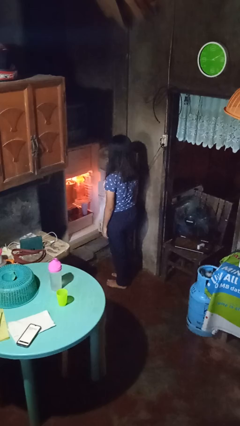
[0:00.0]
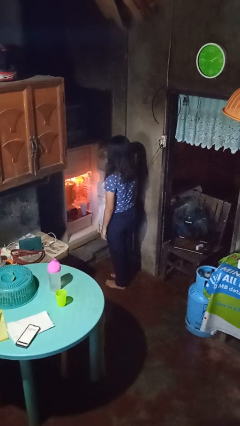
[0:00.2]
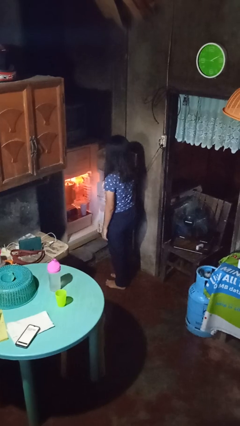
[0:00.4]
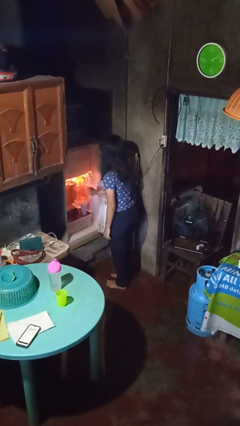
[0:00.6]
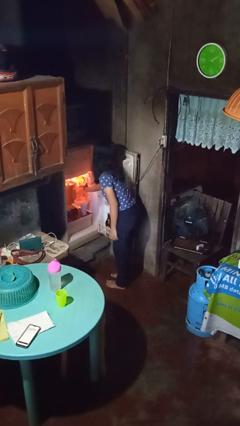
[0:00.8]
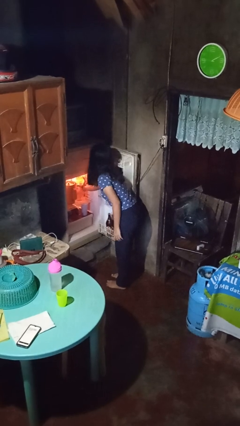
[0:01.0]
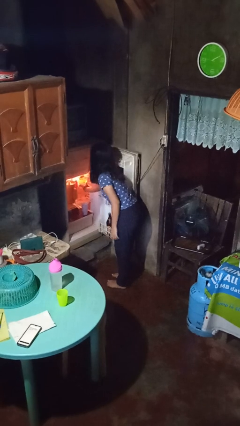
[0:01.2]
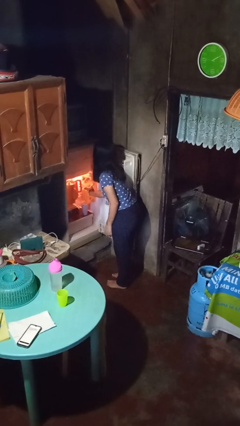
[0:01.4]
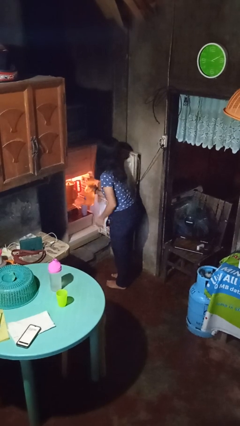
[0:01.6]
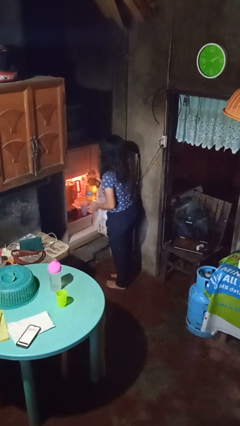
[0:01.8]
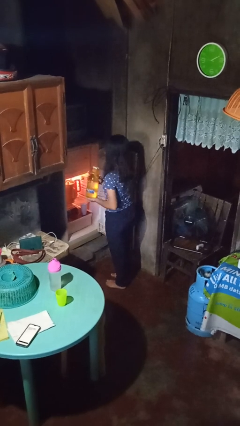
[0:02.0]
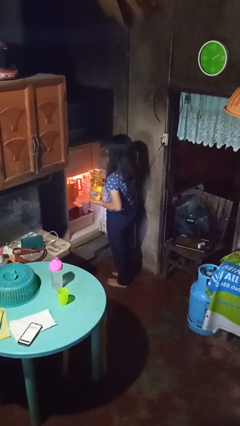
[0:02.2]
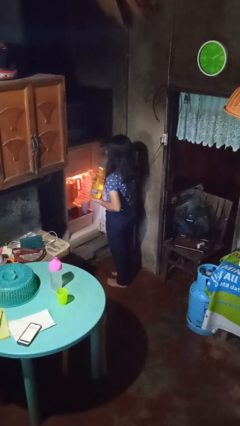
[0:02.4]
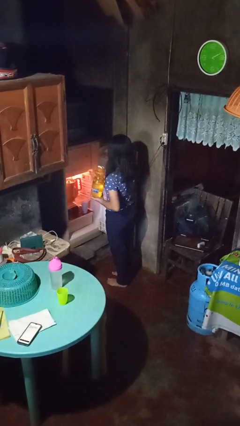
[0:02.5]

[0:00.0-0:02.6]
person takes object from refrigerator

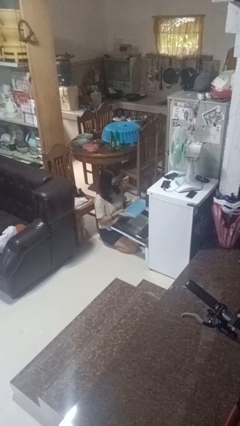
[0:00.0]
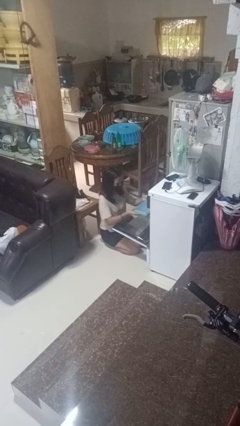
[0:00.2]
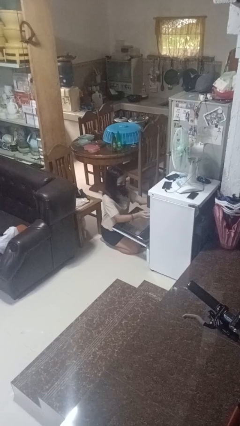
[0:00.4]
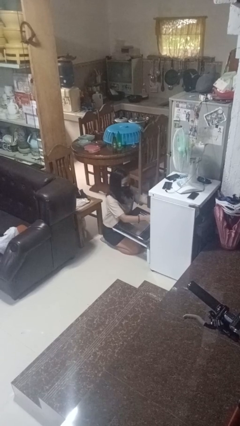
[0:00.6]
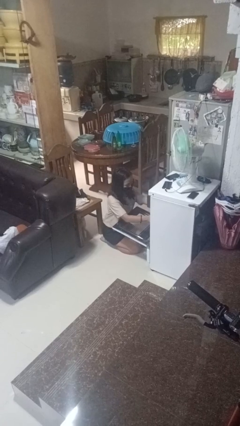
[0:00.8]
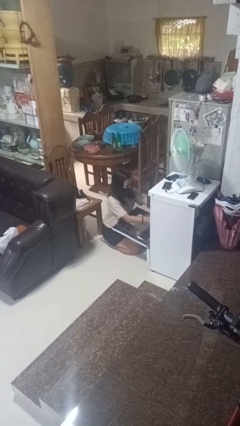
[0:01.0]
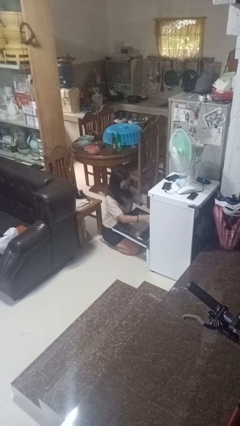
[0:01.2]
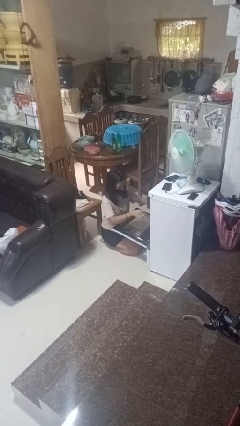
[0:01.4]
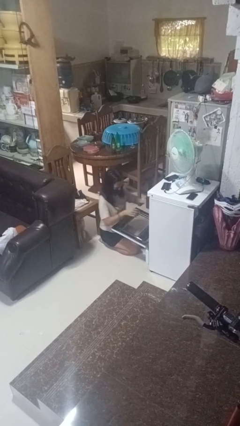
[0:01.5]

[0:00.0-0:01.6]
person puts object into oven

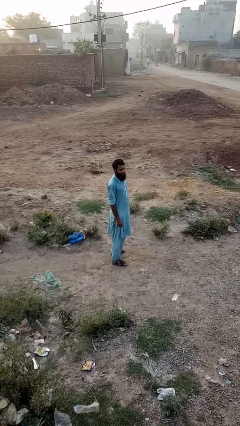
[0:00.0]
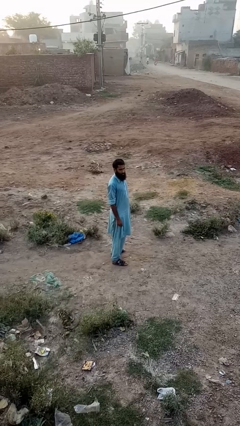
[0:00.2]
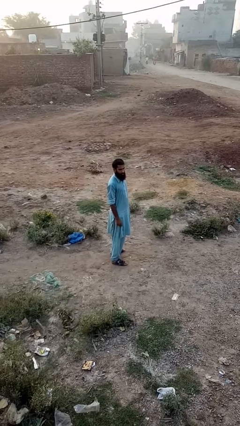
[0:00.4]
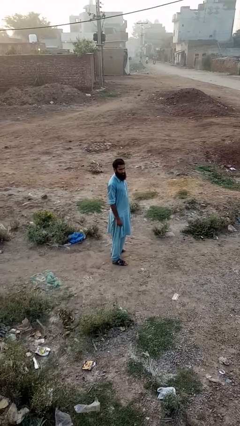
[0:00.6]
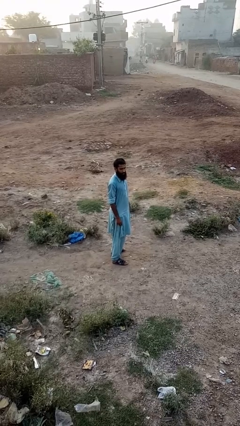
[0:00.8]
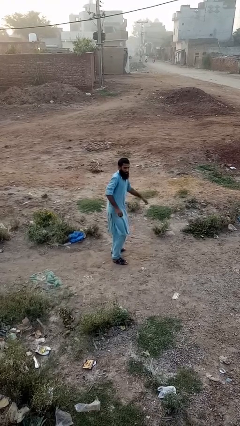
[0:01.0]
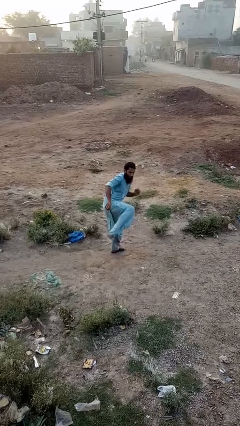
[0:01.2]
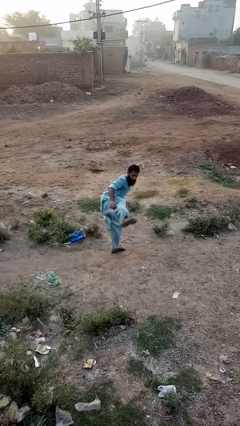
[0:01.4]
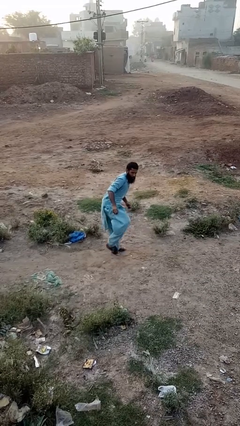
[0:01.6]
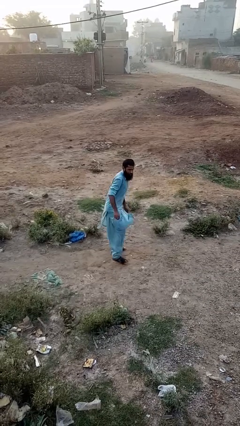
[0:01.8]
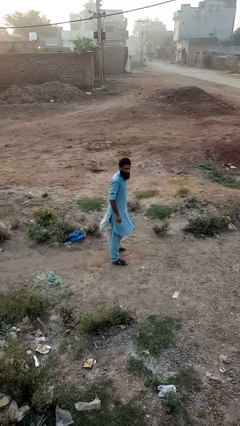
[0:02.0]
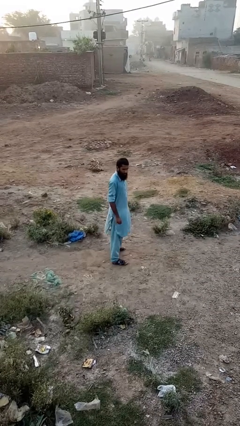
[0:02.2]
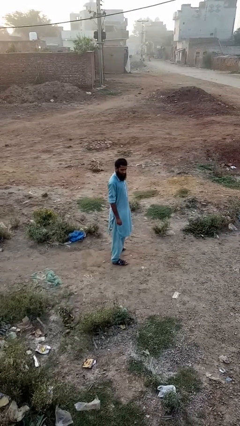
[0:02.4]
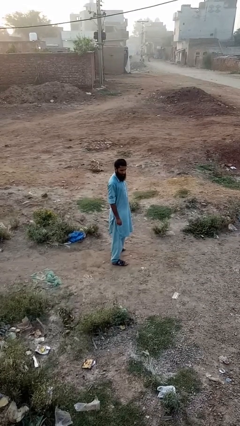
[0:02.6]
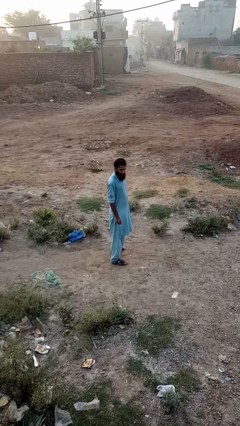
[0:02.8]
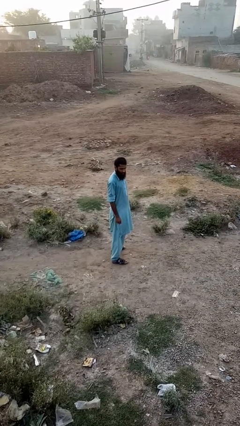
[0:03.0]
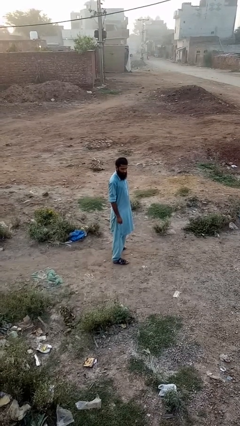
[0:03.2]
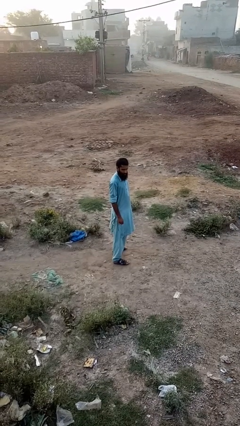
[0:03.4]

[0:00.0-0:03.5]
person karate kicks

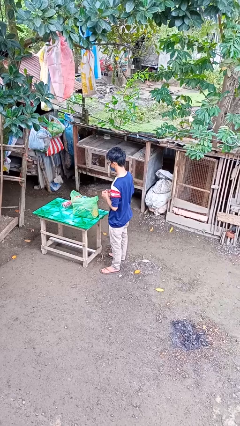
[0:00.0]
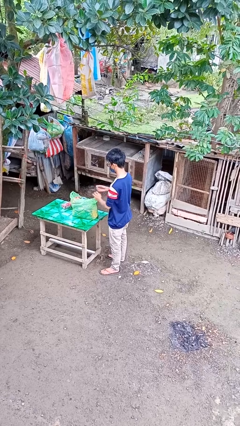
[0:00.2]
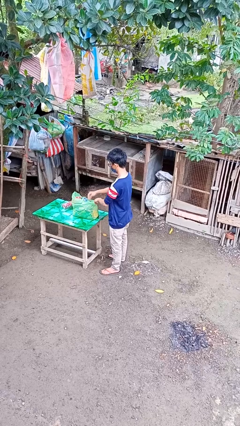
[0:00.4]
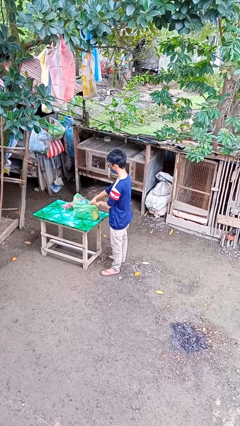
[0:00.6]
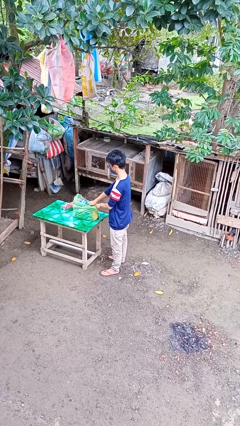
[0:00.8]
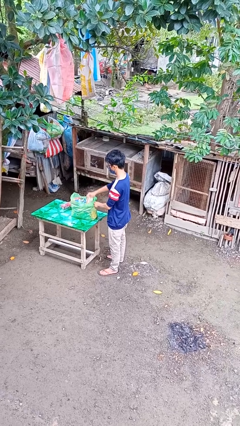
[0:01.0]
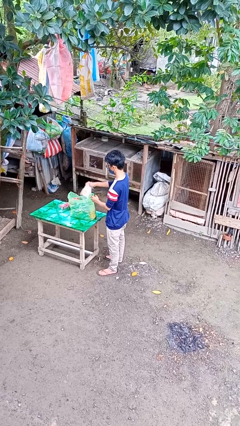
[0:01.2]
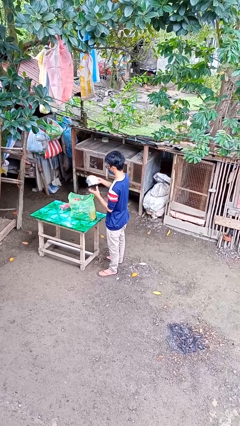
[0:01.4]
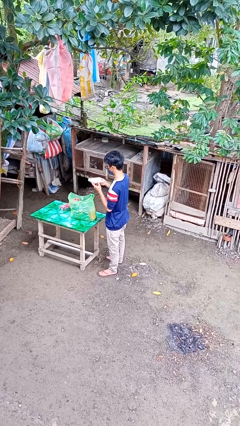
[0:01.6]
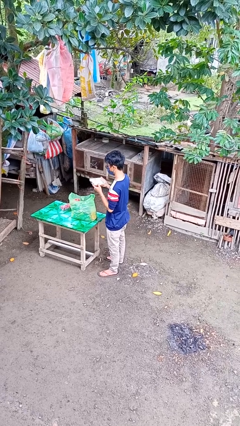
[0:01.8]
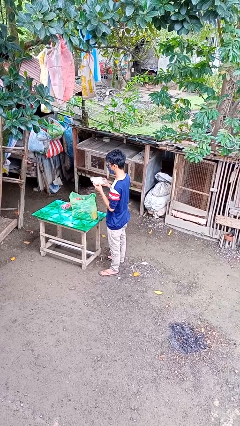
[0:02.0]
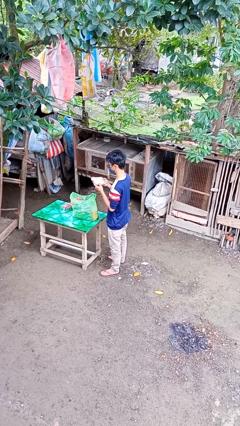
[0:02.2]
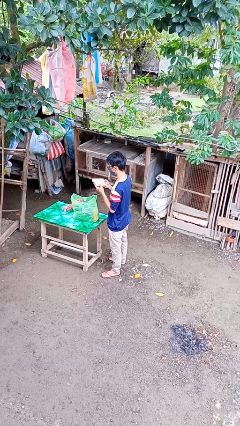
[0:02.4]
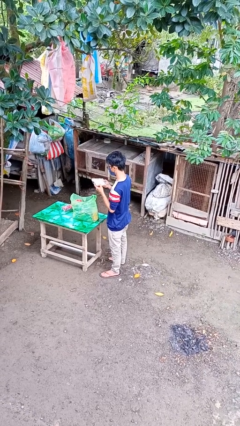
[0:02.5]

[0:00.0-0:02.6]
person takes object from bag

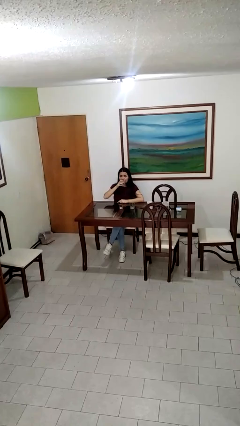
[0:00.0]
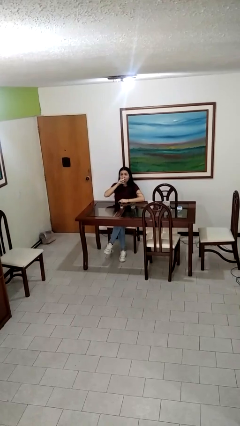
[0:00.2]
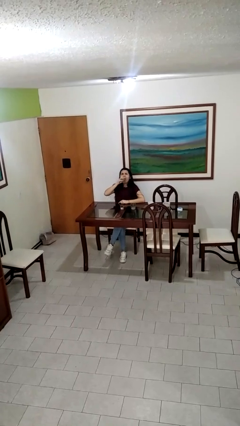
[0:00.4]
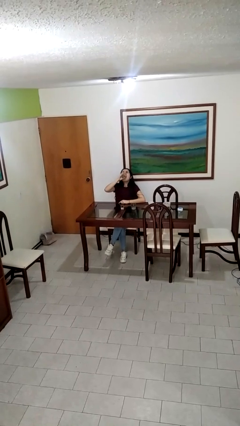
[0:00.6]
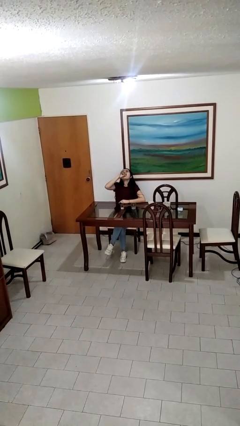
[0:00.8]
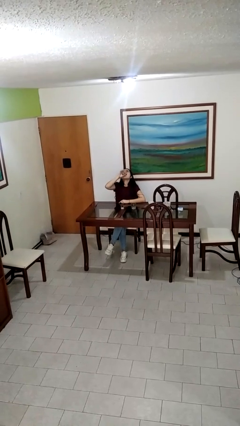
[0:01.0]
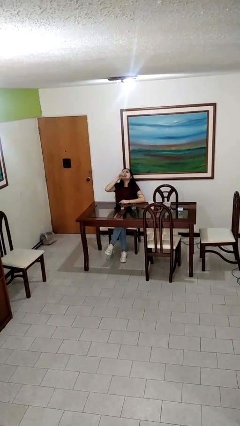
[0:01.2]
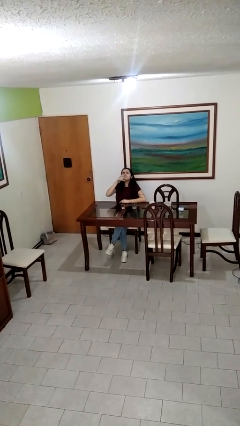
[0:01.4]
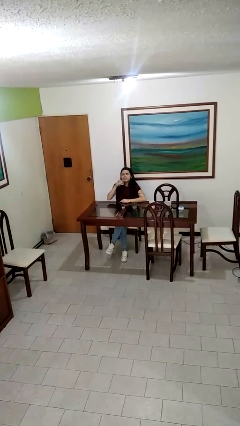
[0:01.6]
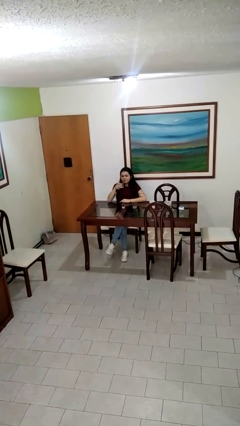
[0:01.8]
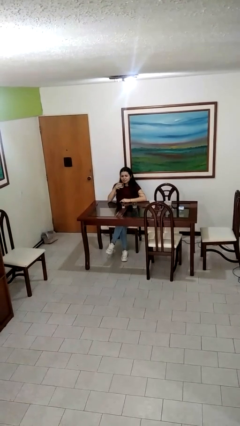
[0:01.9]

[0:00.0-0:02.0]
person drinks from shotglass

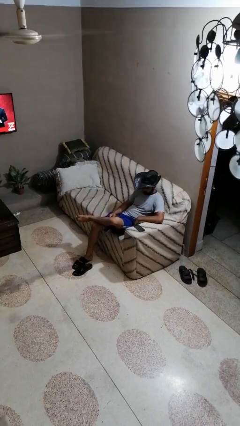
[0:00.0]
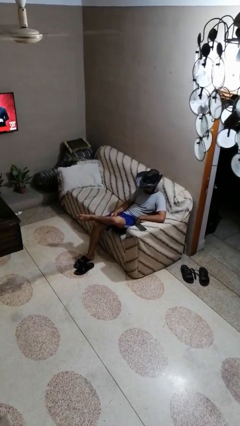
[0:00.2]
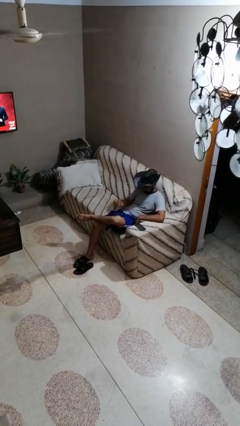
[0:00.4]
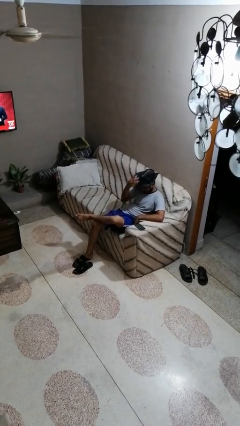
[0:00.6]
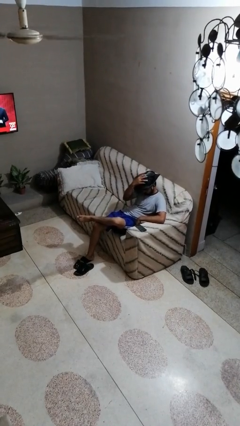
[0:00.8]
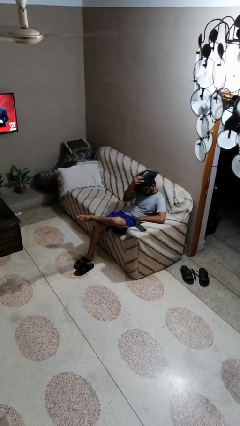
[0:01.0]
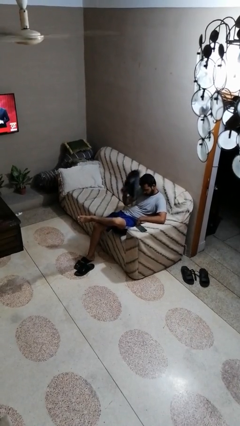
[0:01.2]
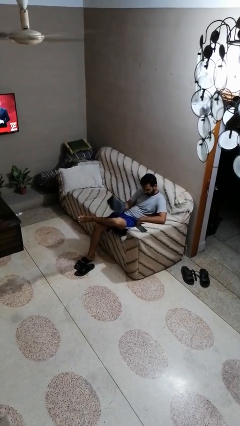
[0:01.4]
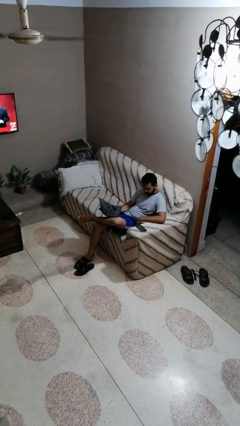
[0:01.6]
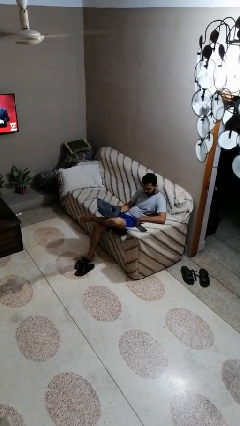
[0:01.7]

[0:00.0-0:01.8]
person takes off hat

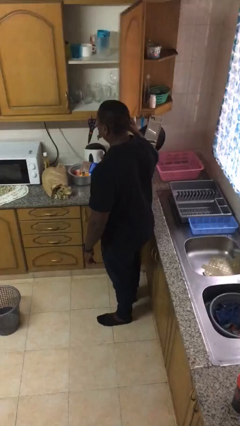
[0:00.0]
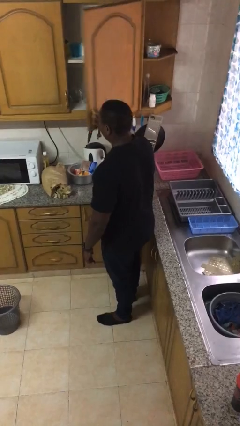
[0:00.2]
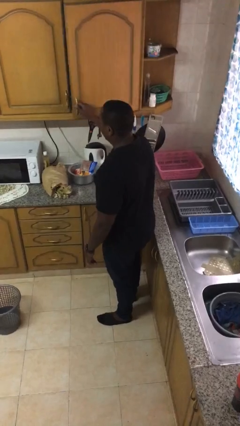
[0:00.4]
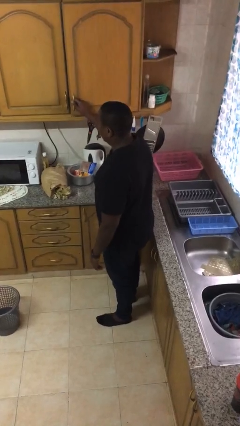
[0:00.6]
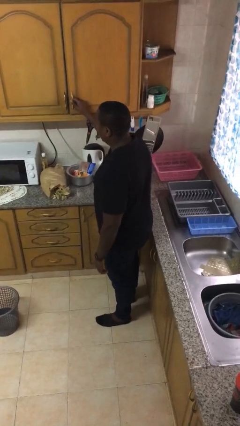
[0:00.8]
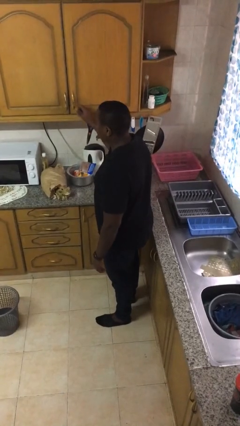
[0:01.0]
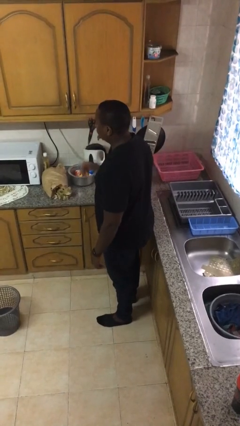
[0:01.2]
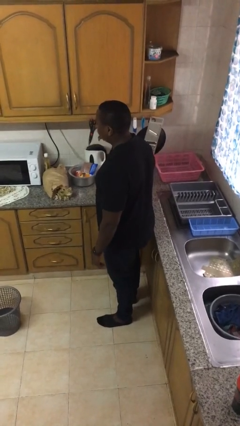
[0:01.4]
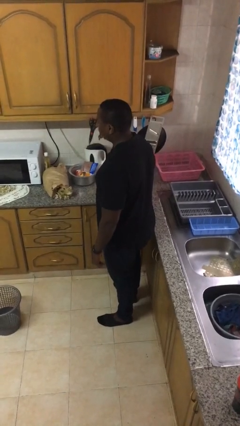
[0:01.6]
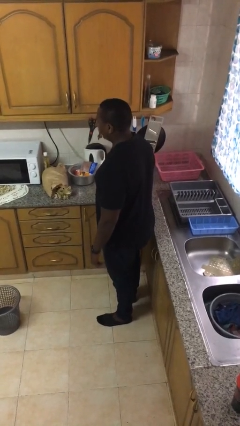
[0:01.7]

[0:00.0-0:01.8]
person closes cabinet

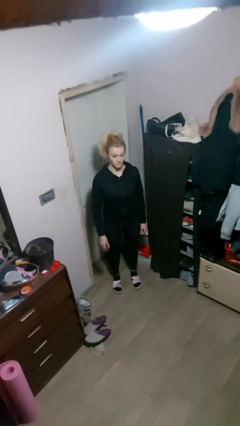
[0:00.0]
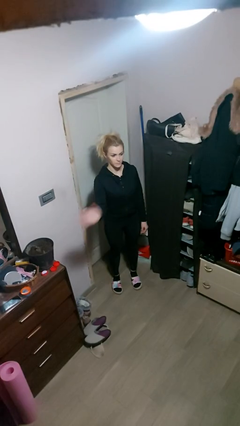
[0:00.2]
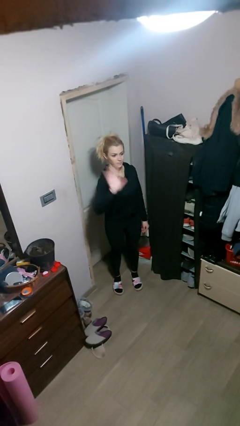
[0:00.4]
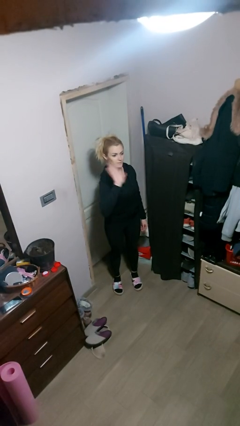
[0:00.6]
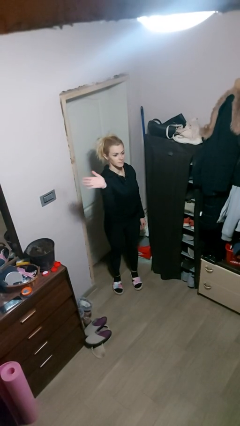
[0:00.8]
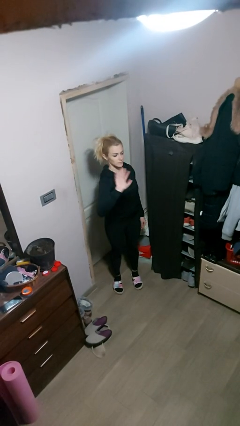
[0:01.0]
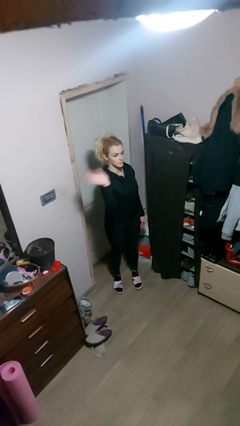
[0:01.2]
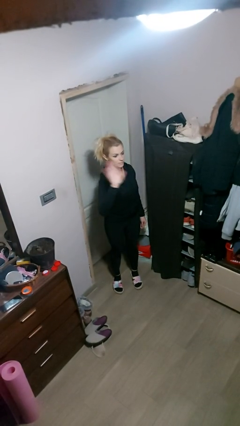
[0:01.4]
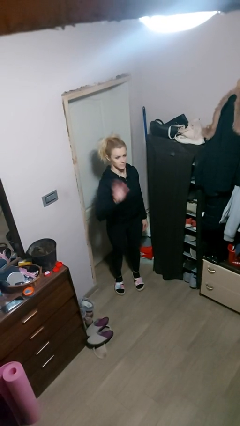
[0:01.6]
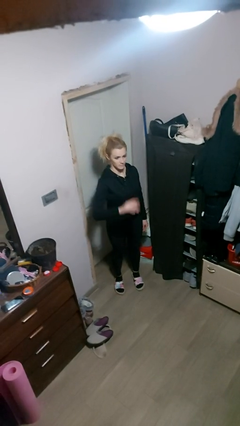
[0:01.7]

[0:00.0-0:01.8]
person waves at person
